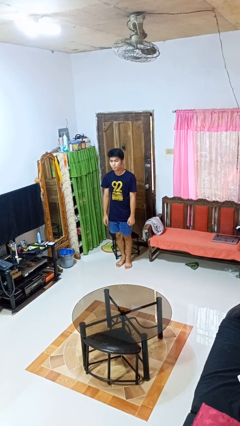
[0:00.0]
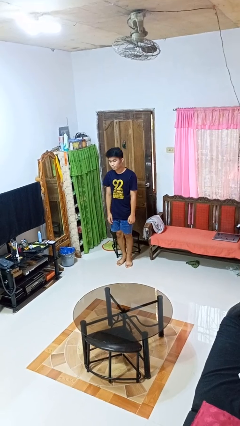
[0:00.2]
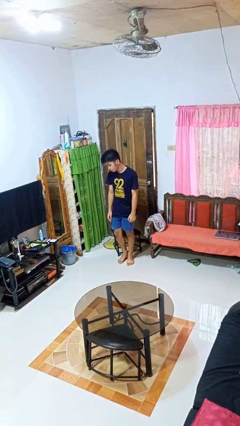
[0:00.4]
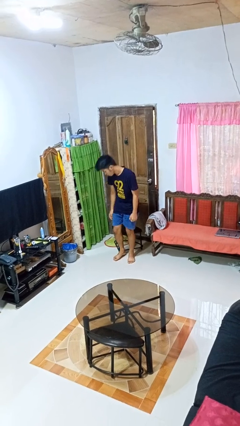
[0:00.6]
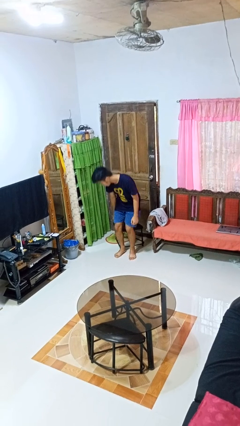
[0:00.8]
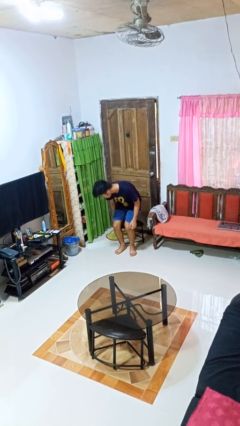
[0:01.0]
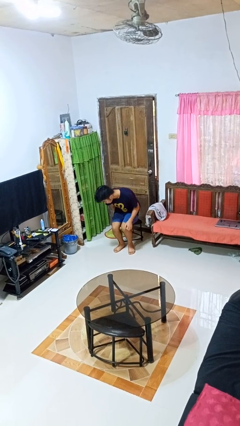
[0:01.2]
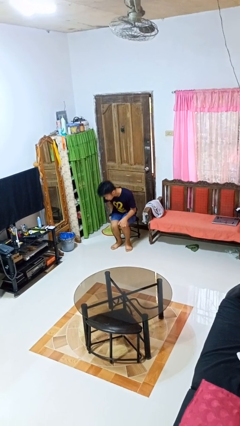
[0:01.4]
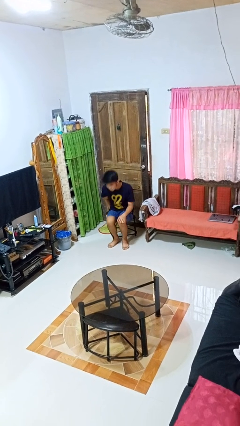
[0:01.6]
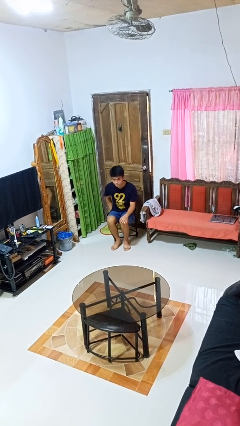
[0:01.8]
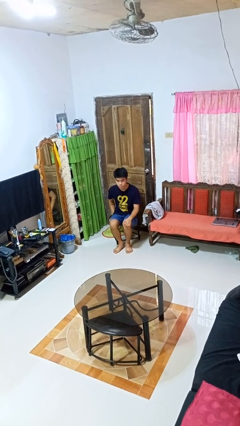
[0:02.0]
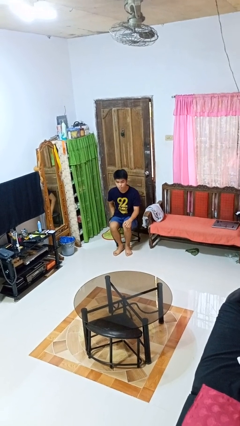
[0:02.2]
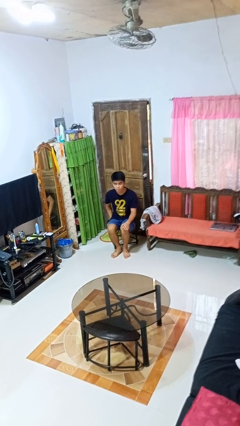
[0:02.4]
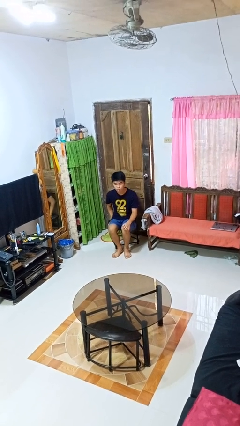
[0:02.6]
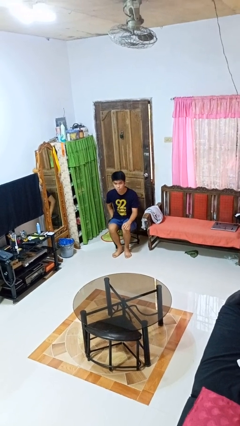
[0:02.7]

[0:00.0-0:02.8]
person sits down

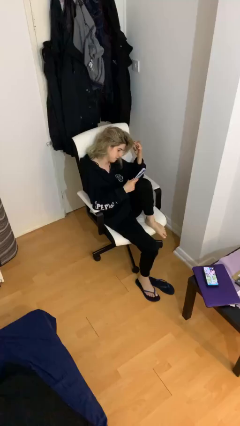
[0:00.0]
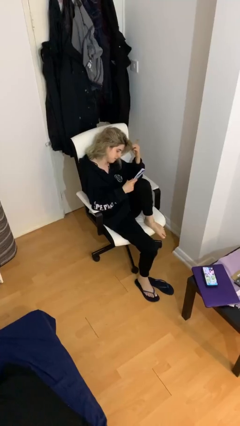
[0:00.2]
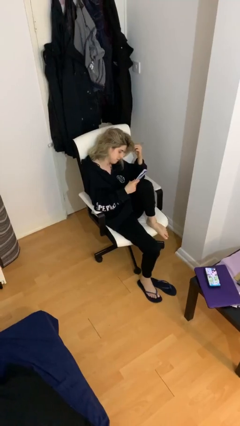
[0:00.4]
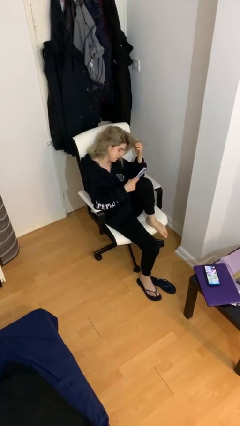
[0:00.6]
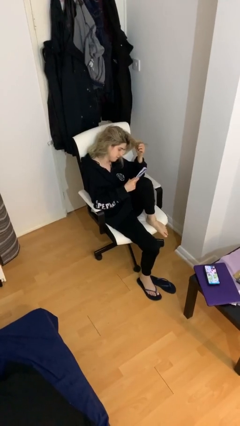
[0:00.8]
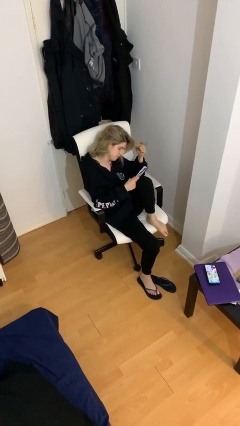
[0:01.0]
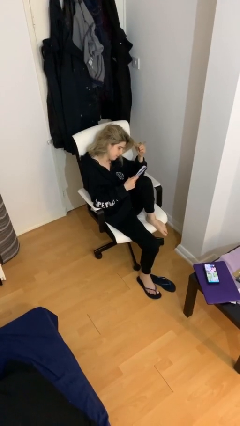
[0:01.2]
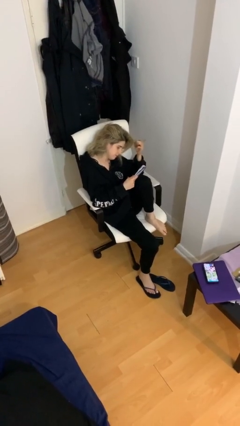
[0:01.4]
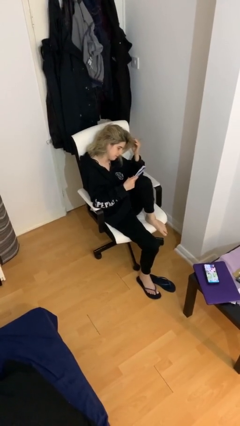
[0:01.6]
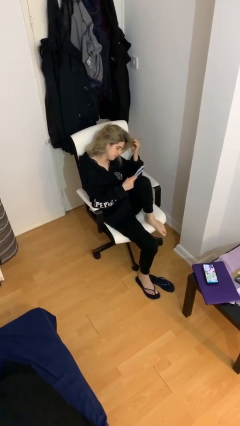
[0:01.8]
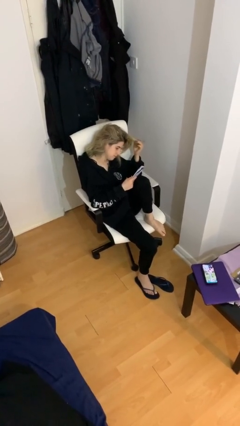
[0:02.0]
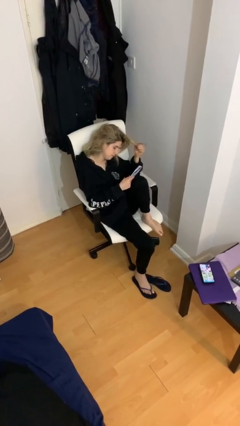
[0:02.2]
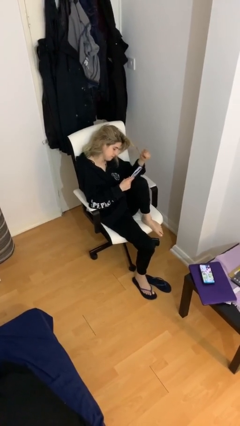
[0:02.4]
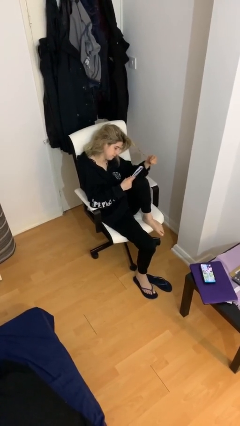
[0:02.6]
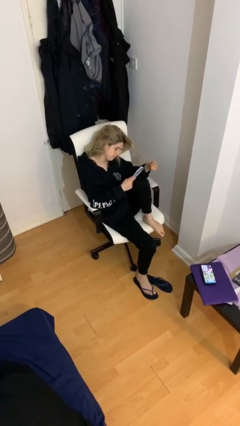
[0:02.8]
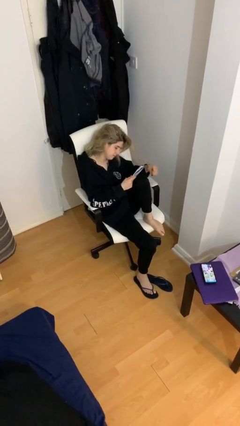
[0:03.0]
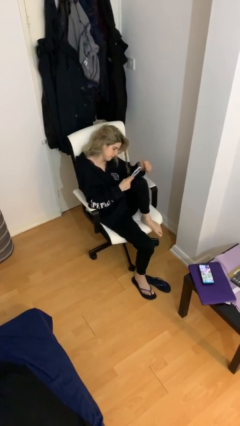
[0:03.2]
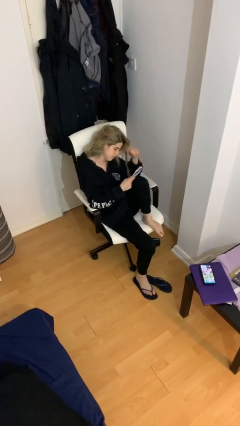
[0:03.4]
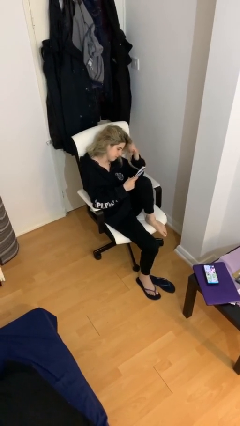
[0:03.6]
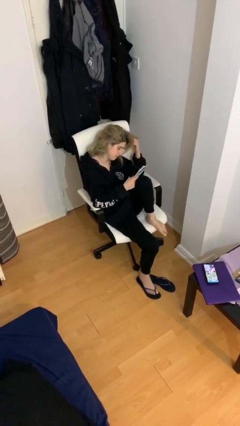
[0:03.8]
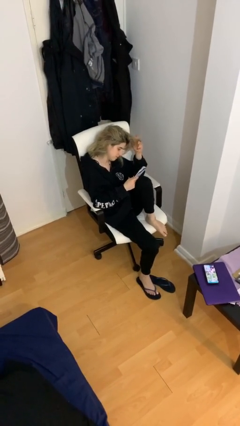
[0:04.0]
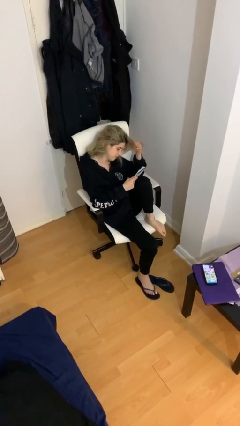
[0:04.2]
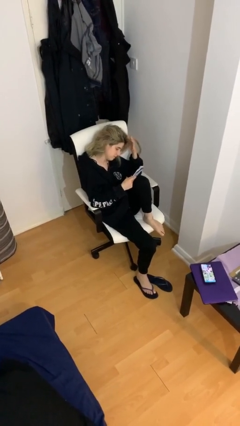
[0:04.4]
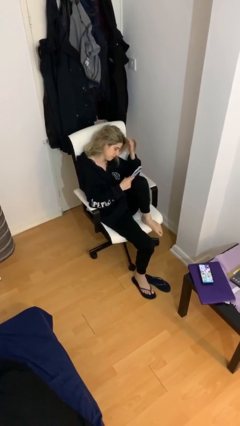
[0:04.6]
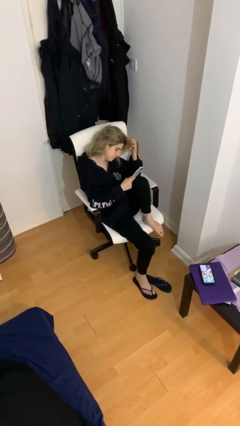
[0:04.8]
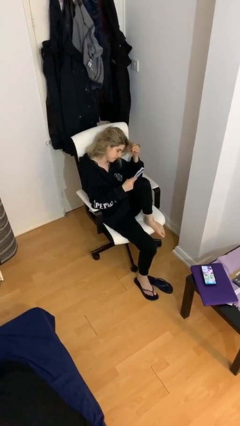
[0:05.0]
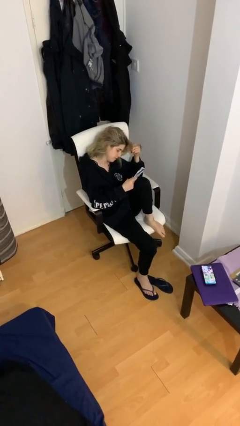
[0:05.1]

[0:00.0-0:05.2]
person reads document

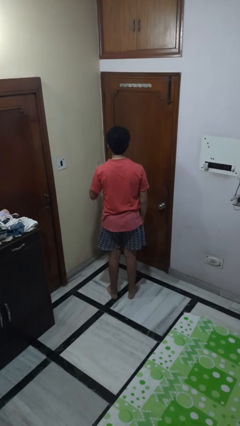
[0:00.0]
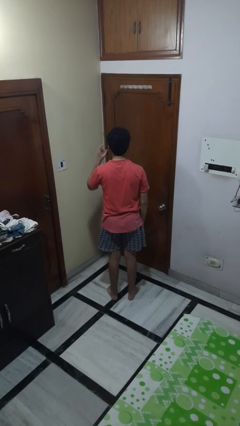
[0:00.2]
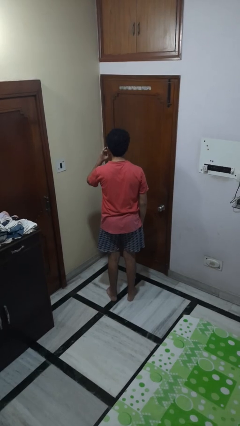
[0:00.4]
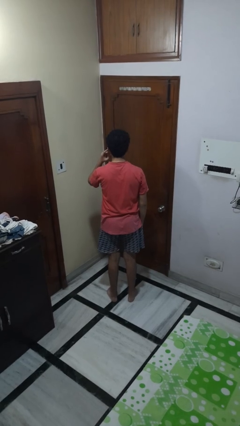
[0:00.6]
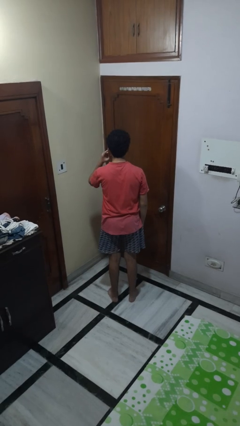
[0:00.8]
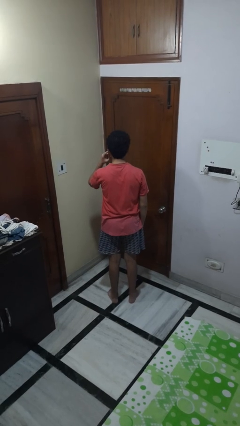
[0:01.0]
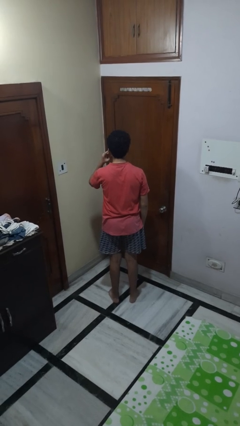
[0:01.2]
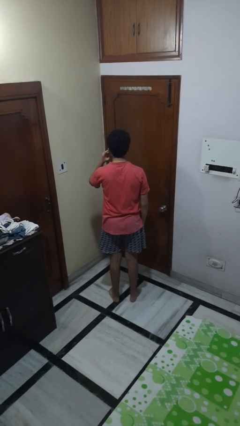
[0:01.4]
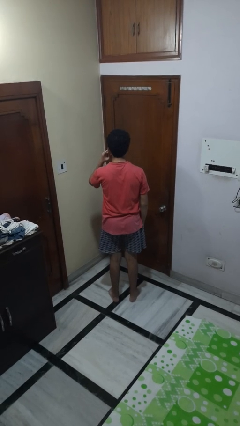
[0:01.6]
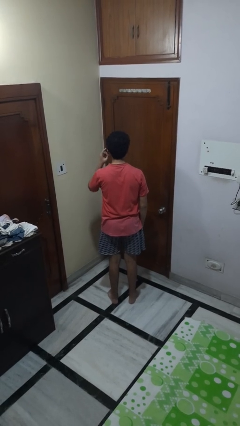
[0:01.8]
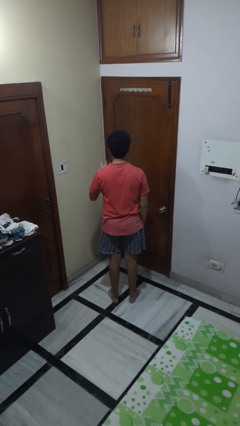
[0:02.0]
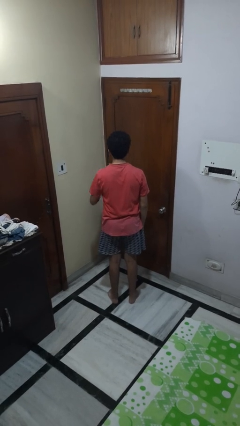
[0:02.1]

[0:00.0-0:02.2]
person gestures listen closely

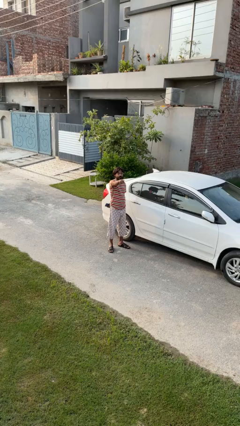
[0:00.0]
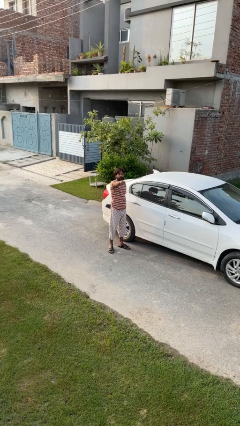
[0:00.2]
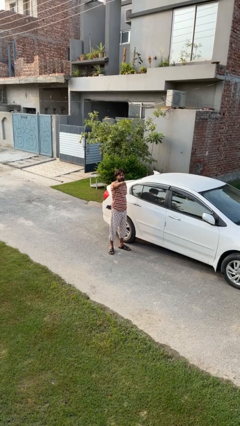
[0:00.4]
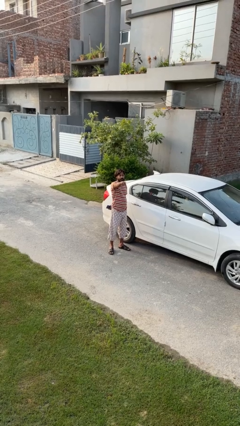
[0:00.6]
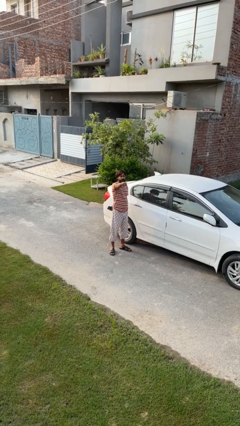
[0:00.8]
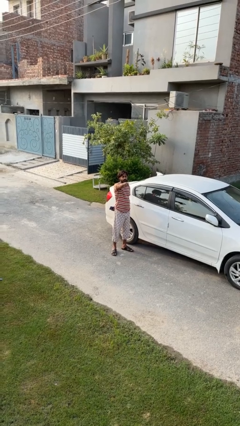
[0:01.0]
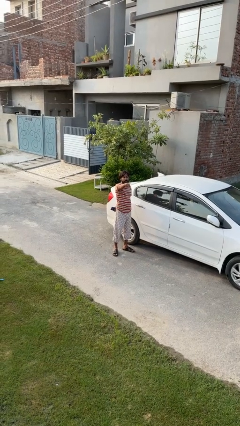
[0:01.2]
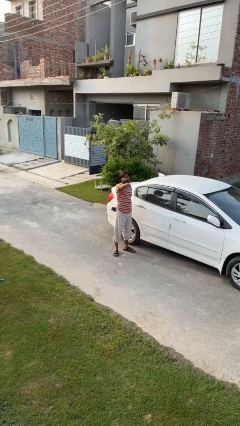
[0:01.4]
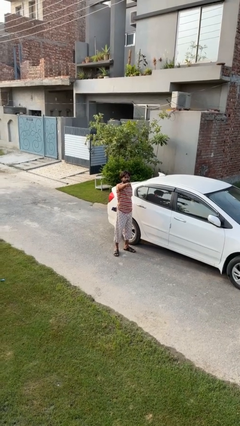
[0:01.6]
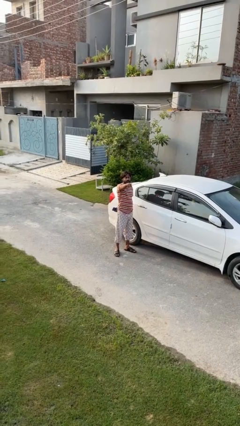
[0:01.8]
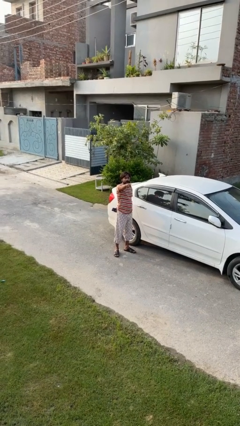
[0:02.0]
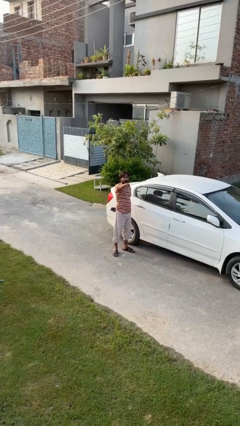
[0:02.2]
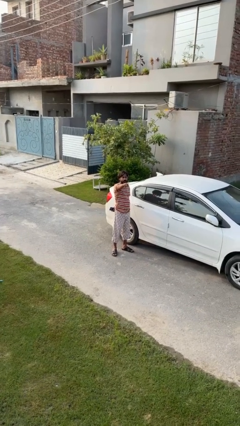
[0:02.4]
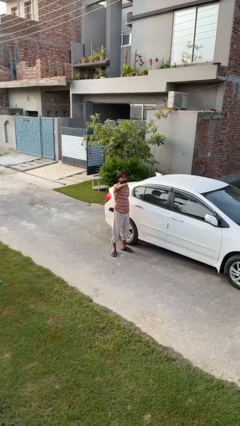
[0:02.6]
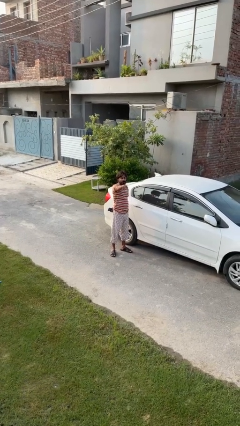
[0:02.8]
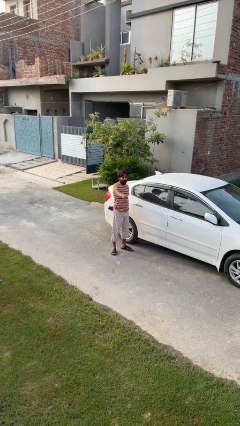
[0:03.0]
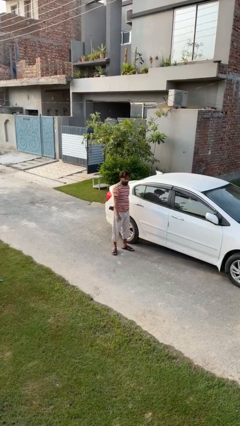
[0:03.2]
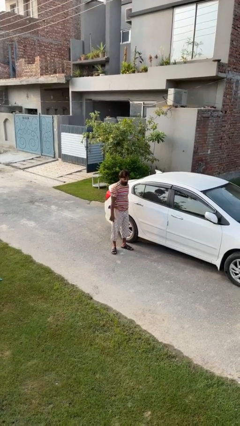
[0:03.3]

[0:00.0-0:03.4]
person points at person

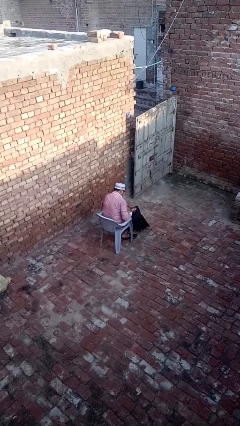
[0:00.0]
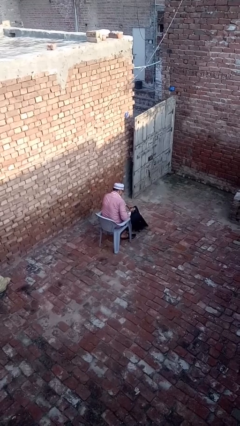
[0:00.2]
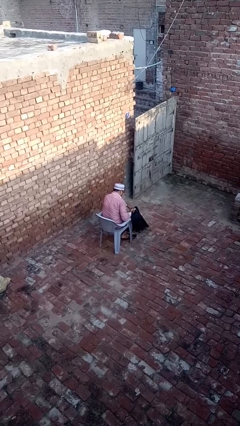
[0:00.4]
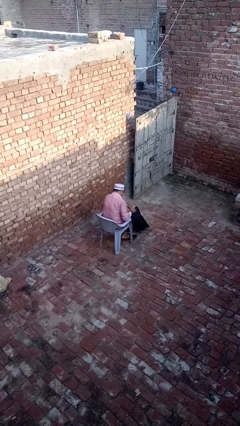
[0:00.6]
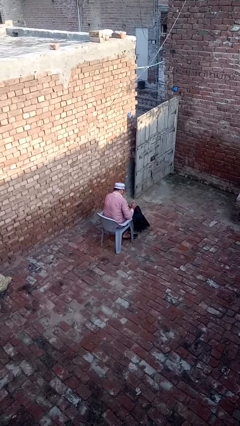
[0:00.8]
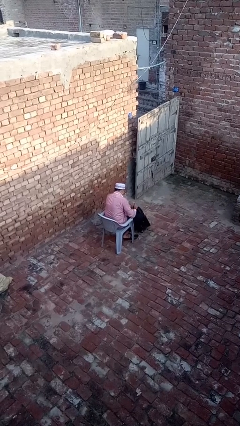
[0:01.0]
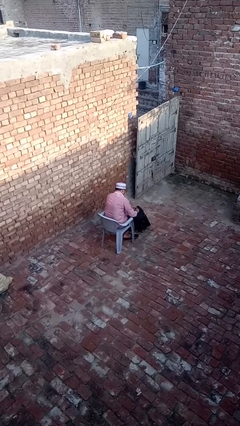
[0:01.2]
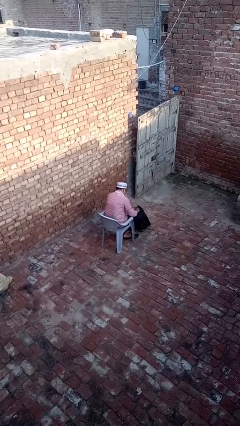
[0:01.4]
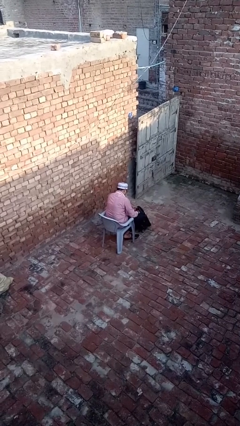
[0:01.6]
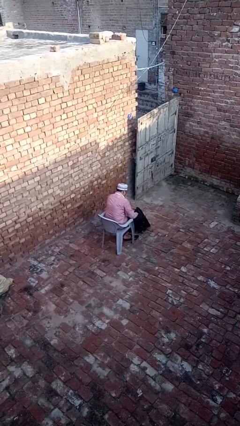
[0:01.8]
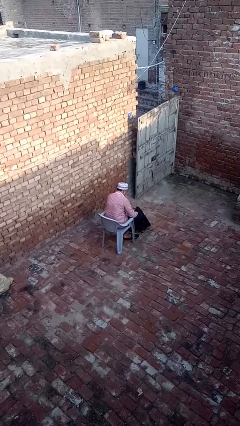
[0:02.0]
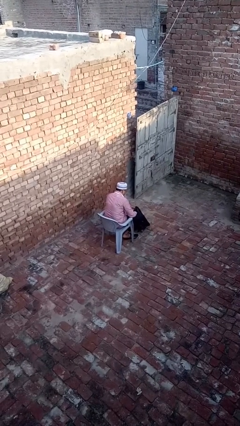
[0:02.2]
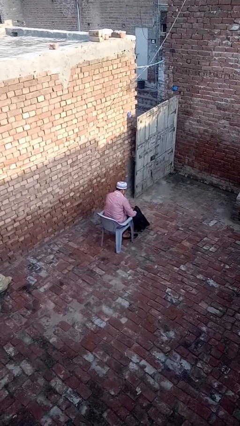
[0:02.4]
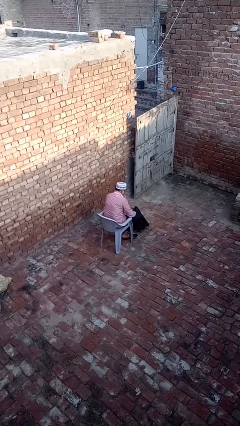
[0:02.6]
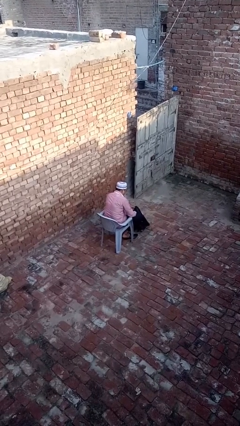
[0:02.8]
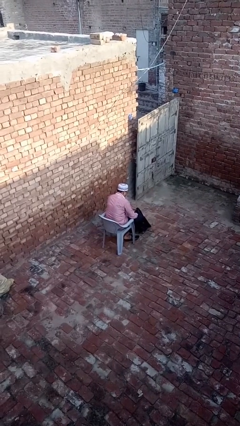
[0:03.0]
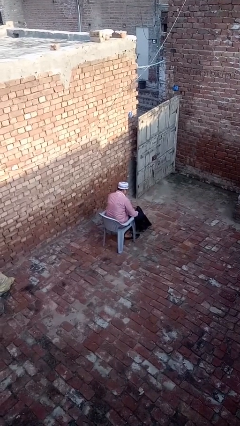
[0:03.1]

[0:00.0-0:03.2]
person puts object into backpack

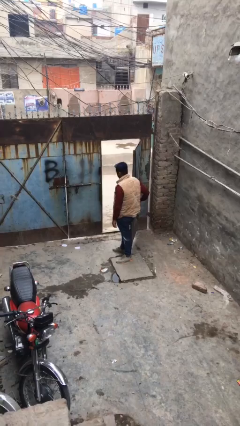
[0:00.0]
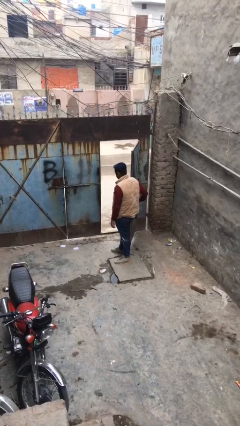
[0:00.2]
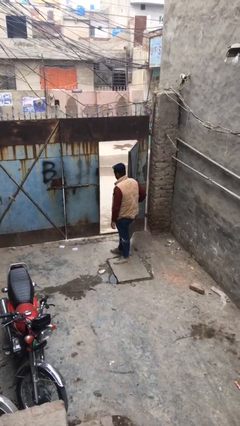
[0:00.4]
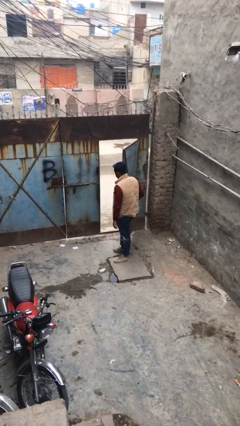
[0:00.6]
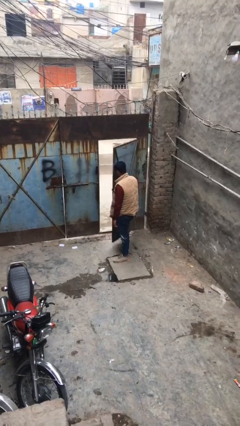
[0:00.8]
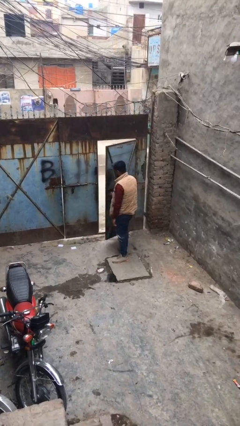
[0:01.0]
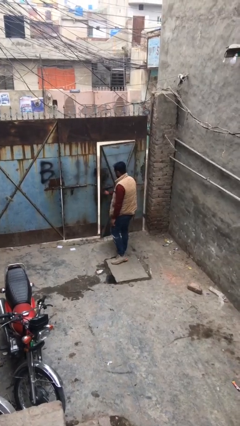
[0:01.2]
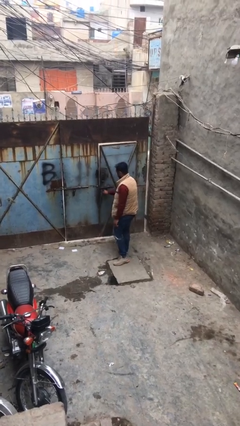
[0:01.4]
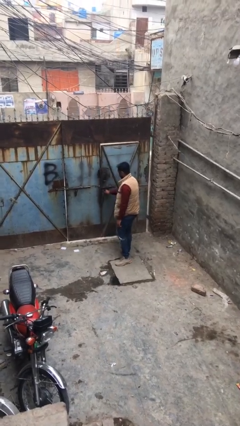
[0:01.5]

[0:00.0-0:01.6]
person closes facility door
